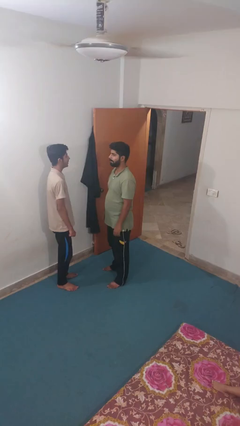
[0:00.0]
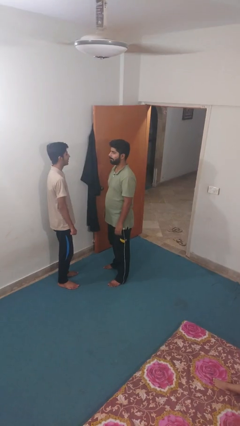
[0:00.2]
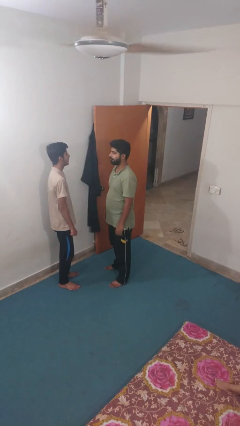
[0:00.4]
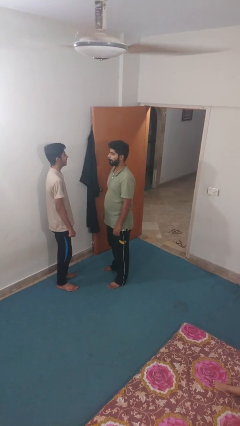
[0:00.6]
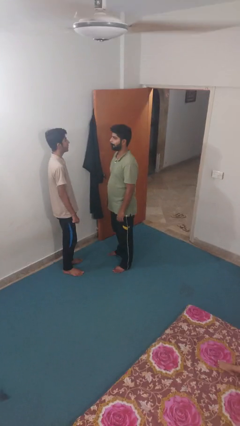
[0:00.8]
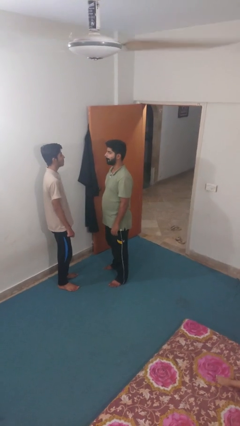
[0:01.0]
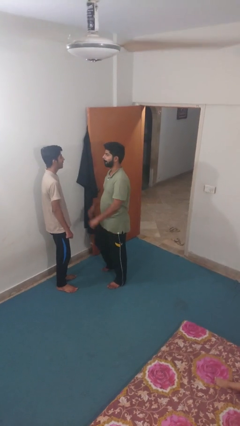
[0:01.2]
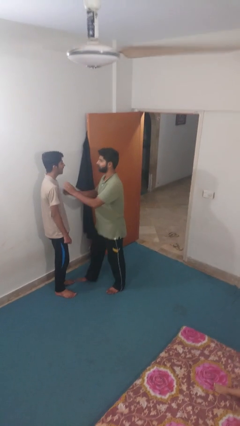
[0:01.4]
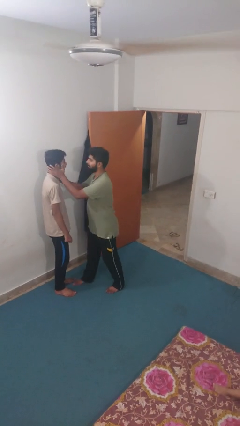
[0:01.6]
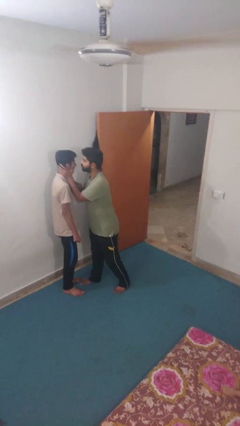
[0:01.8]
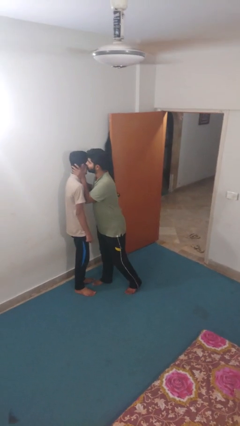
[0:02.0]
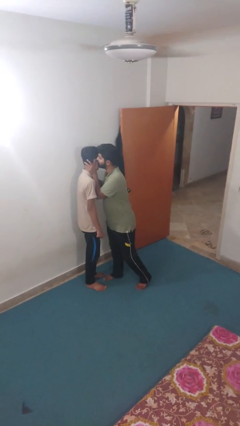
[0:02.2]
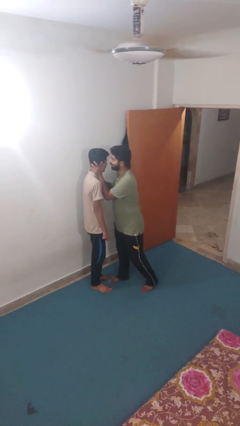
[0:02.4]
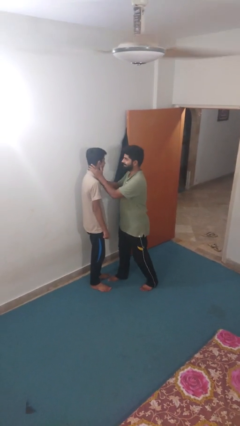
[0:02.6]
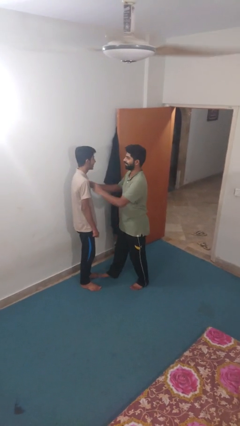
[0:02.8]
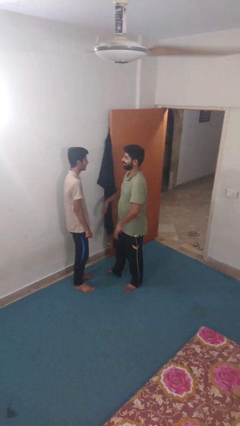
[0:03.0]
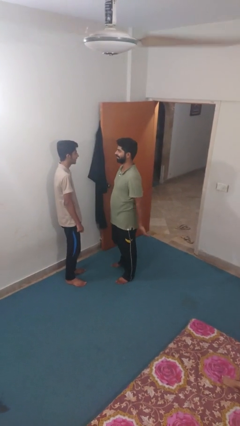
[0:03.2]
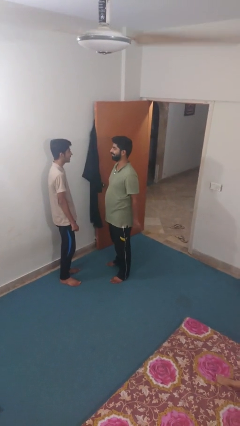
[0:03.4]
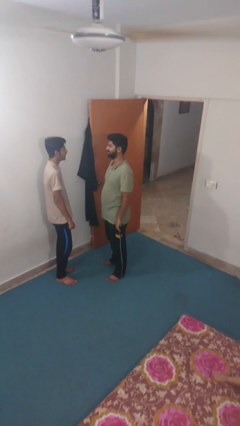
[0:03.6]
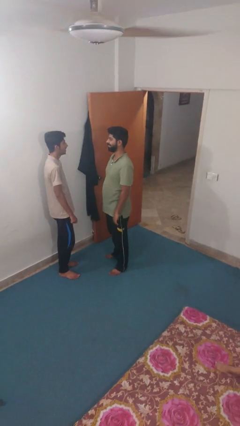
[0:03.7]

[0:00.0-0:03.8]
person kisses cheek of person

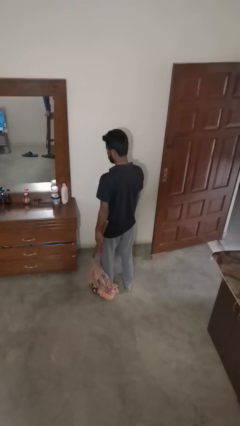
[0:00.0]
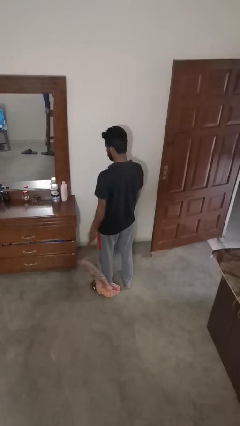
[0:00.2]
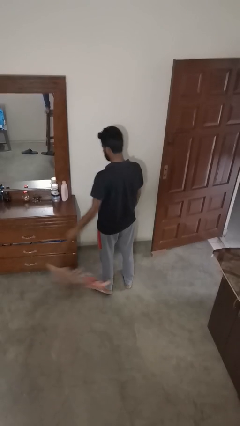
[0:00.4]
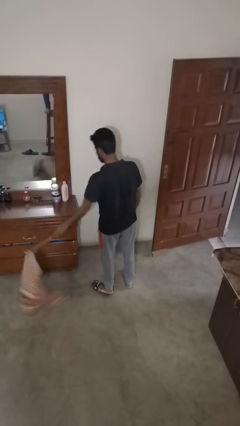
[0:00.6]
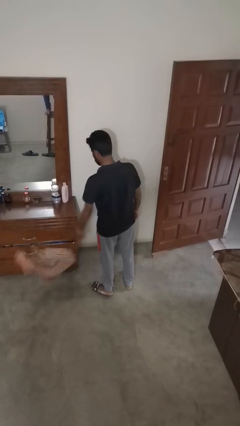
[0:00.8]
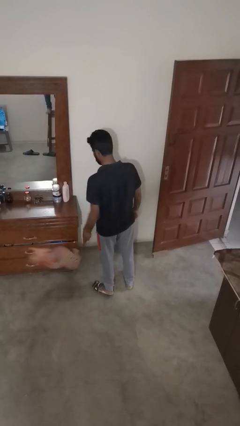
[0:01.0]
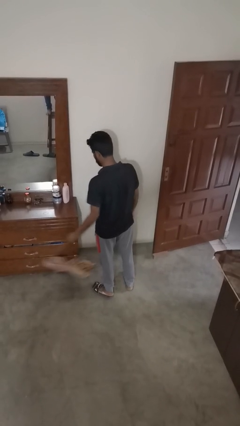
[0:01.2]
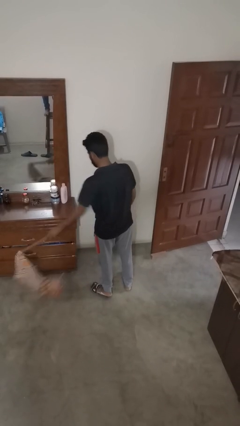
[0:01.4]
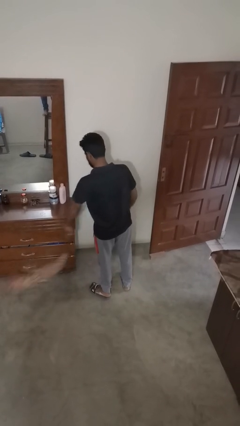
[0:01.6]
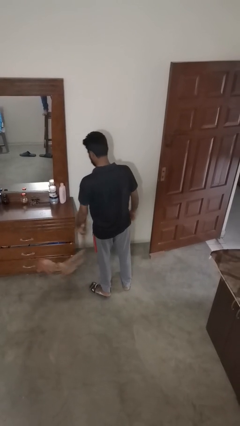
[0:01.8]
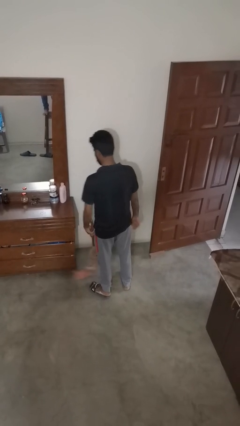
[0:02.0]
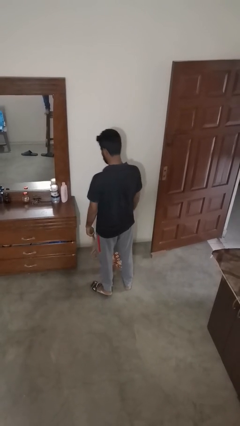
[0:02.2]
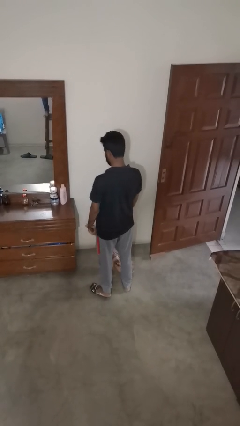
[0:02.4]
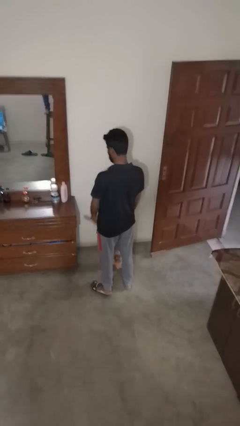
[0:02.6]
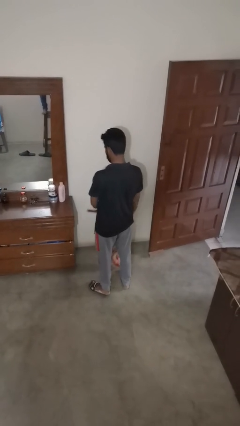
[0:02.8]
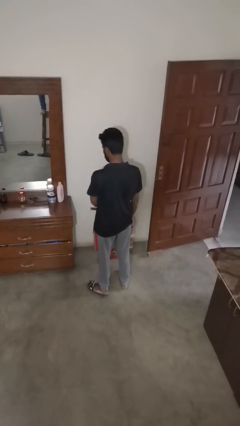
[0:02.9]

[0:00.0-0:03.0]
person dusts furniture

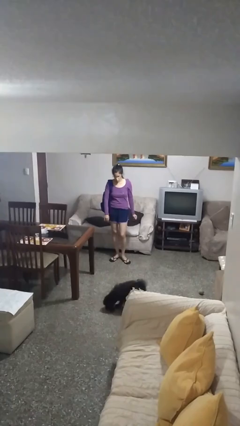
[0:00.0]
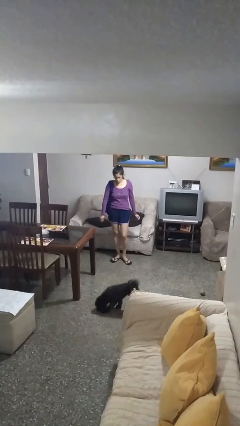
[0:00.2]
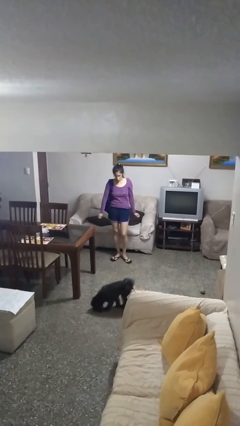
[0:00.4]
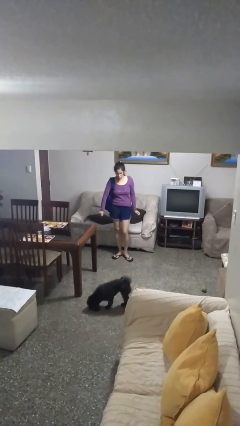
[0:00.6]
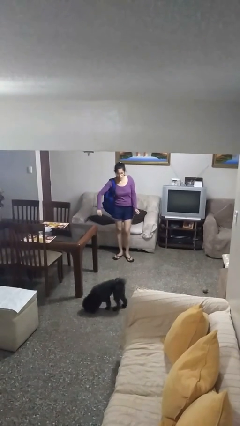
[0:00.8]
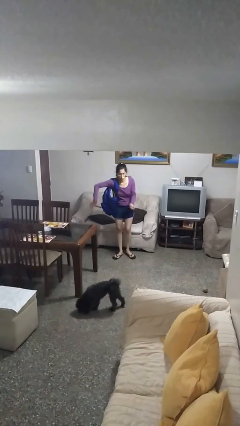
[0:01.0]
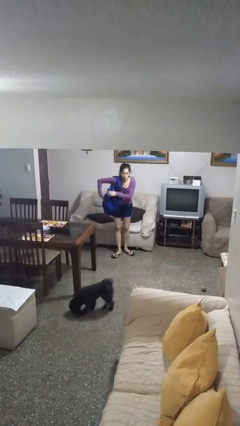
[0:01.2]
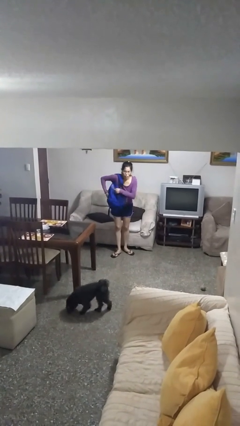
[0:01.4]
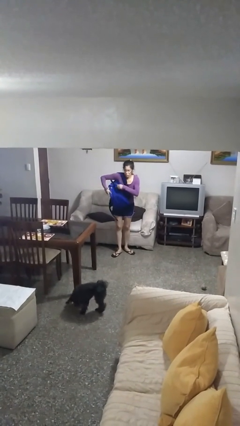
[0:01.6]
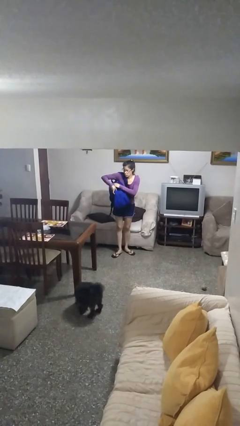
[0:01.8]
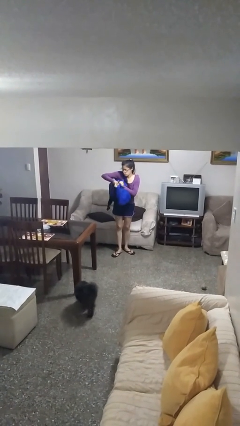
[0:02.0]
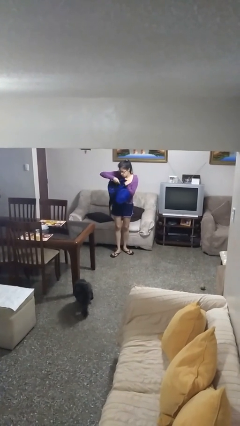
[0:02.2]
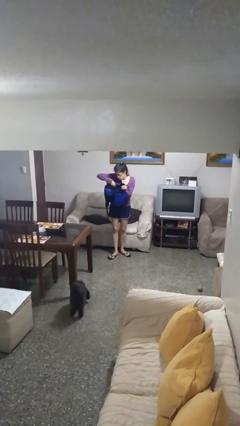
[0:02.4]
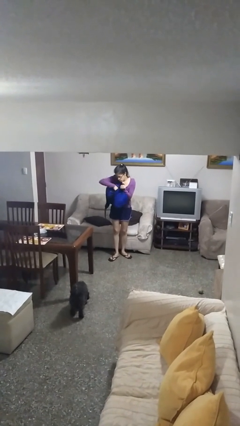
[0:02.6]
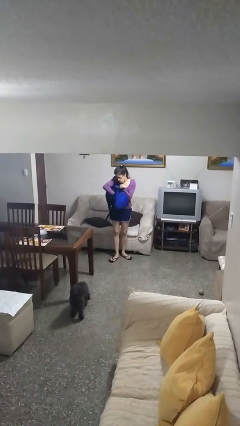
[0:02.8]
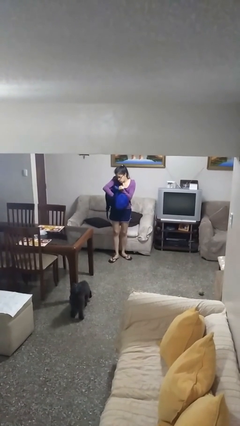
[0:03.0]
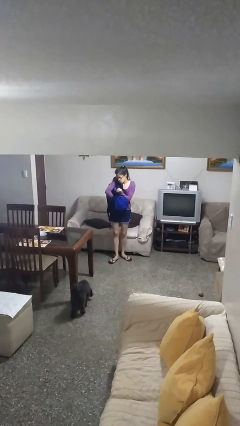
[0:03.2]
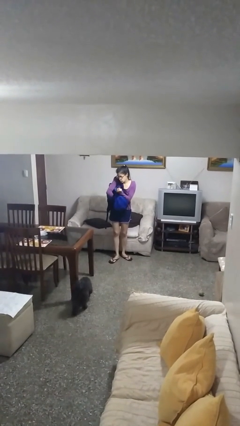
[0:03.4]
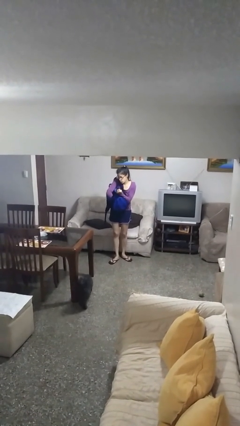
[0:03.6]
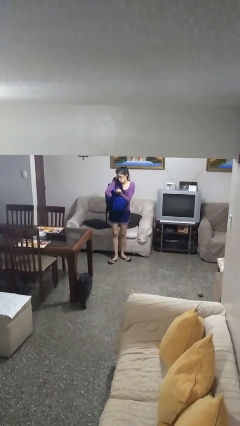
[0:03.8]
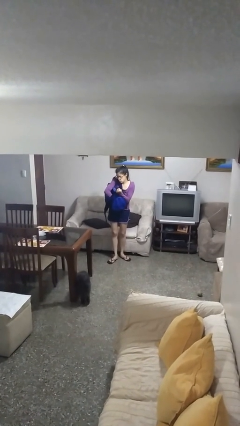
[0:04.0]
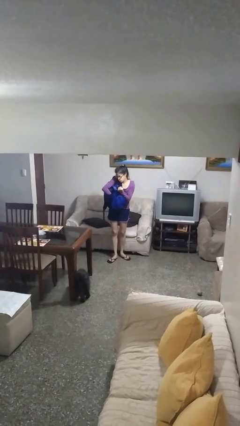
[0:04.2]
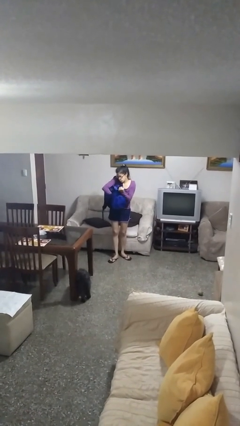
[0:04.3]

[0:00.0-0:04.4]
person searches in backpack

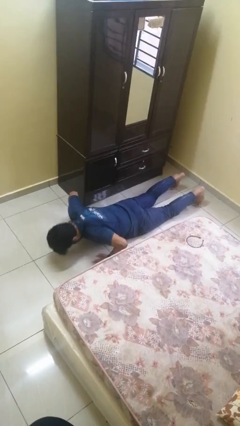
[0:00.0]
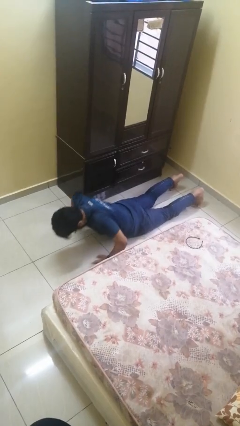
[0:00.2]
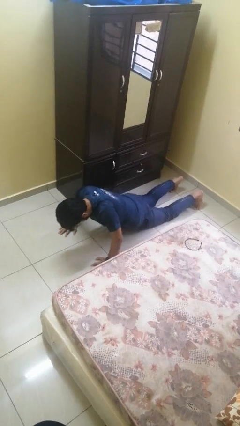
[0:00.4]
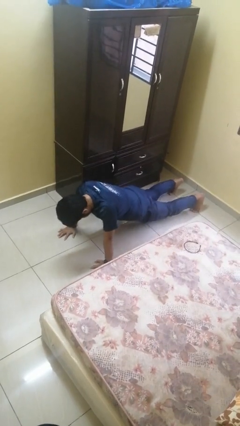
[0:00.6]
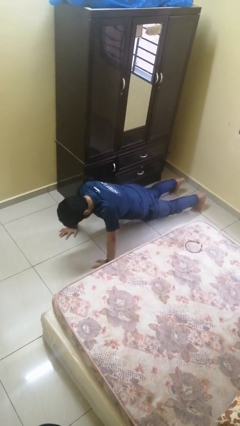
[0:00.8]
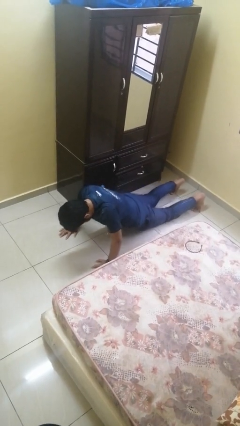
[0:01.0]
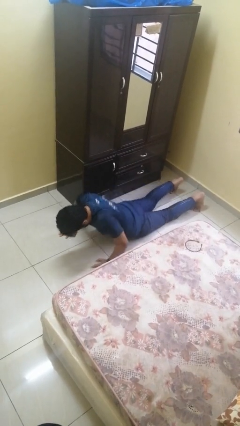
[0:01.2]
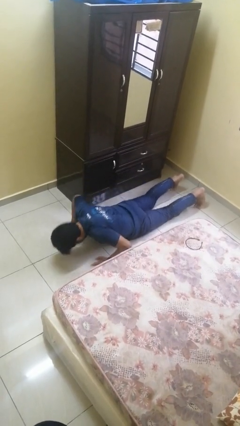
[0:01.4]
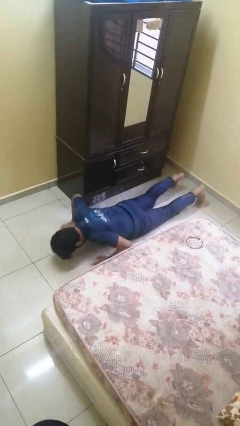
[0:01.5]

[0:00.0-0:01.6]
person exercises with pushup

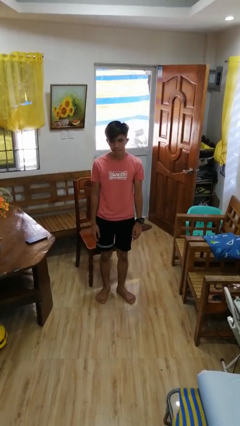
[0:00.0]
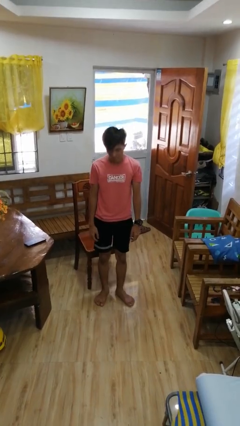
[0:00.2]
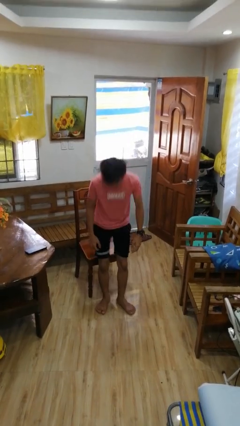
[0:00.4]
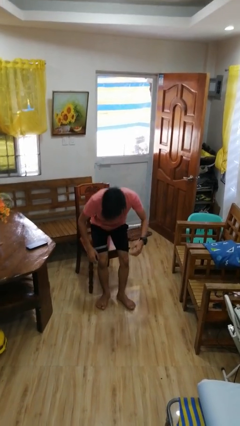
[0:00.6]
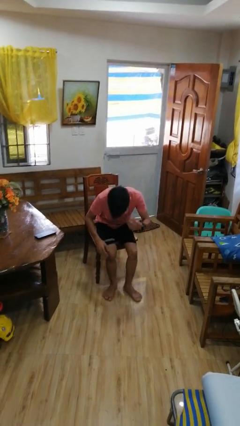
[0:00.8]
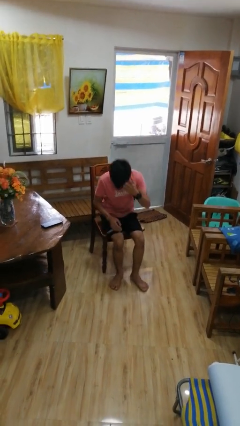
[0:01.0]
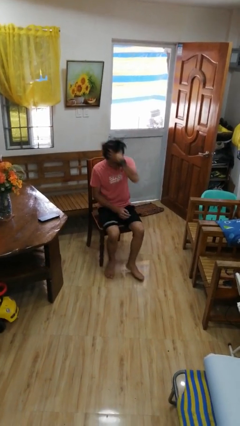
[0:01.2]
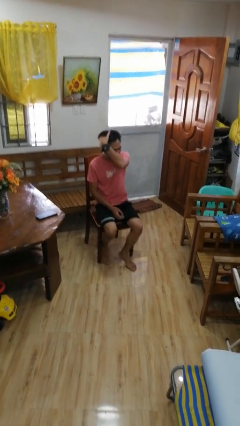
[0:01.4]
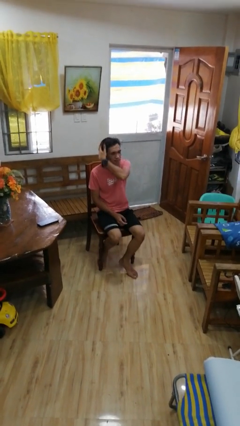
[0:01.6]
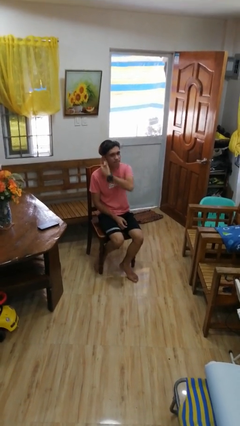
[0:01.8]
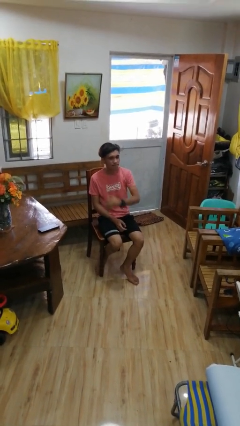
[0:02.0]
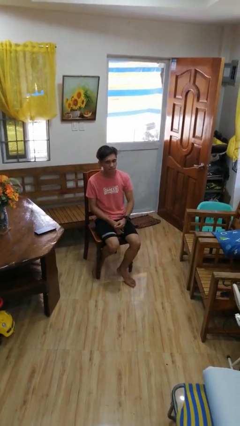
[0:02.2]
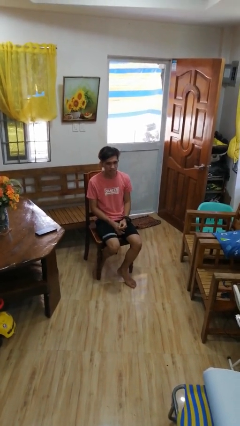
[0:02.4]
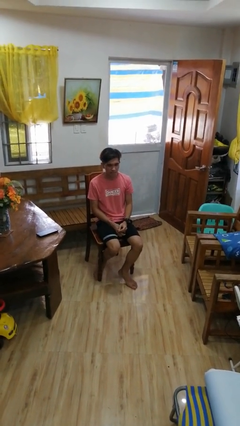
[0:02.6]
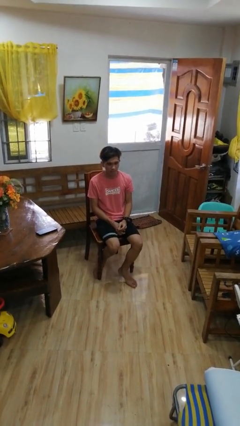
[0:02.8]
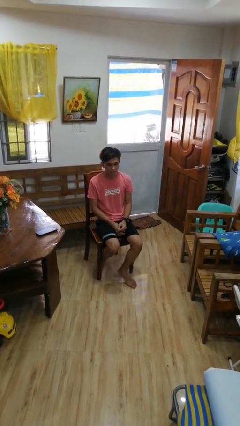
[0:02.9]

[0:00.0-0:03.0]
person sits down

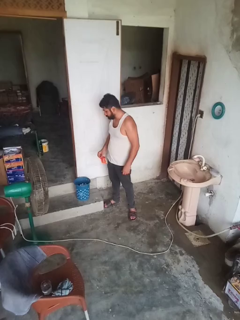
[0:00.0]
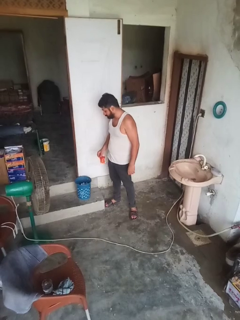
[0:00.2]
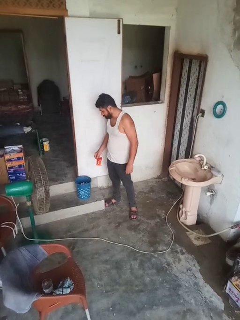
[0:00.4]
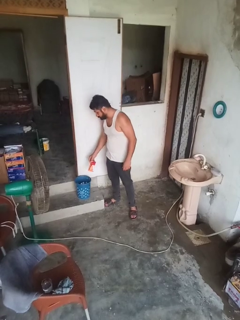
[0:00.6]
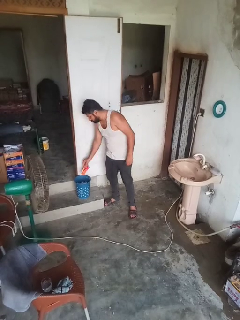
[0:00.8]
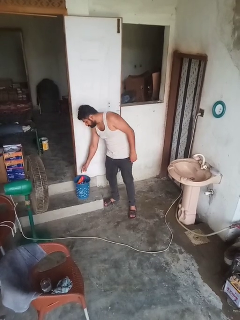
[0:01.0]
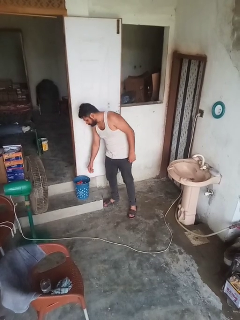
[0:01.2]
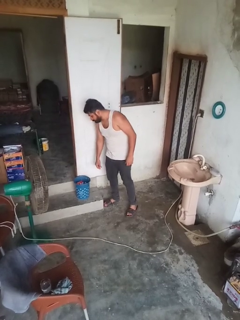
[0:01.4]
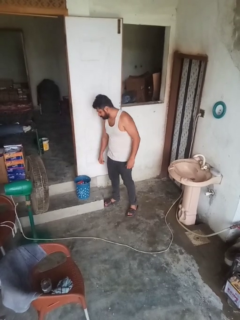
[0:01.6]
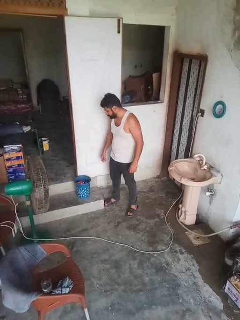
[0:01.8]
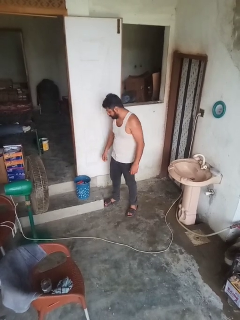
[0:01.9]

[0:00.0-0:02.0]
person discards trash
